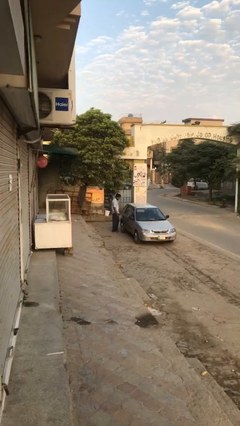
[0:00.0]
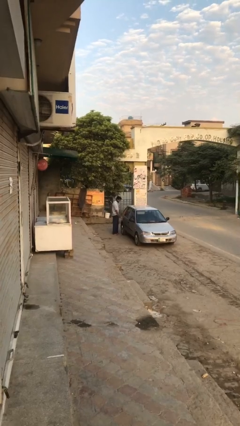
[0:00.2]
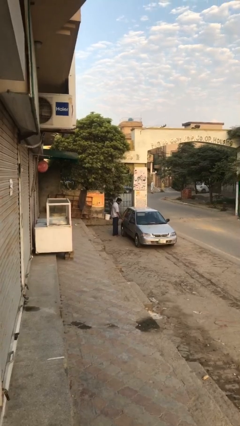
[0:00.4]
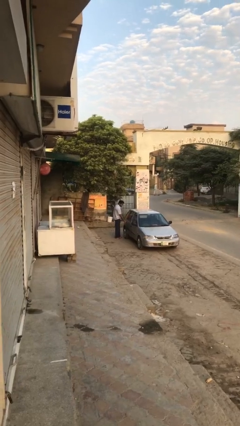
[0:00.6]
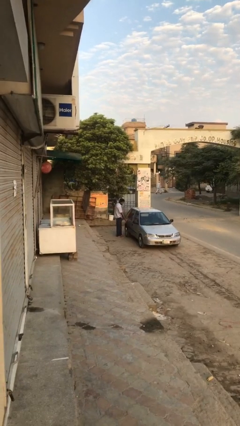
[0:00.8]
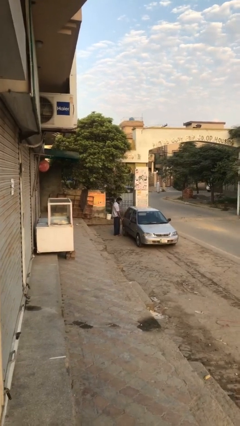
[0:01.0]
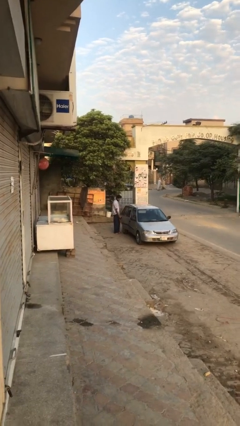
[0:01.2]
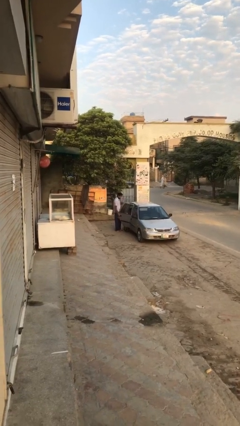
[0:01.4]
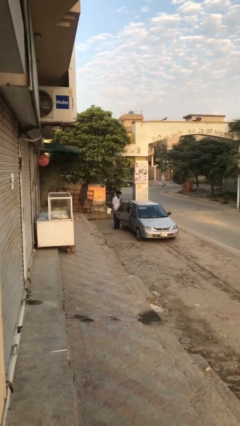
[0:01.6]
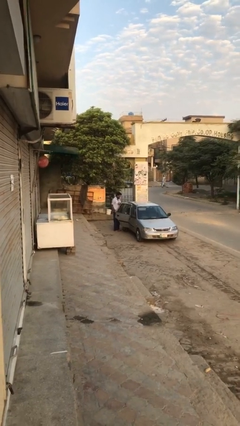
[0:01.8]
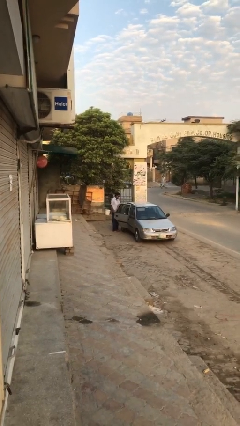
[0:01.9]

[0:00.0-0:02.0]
person opens car door

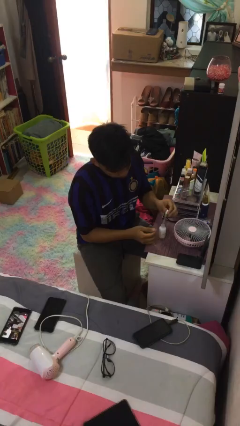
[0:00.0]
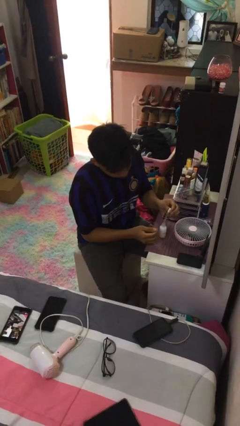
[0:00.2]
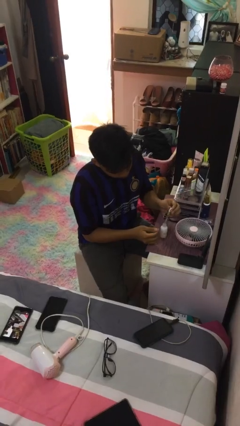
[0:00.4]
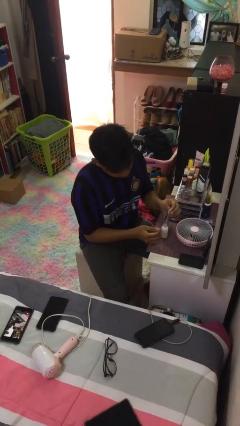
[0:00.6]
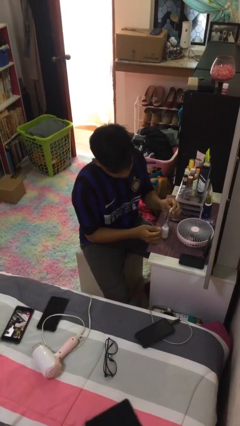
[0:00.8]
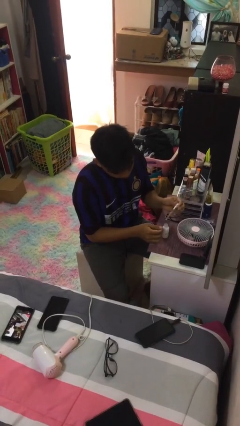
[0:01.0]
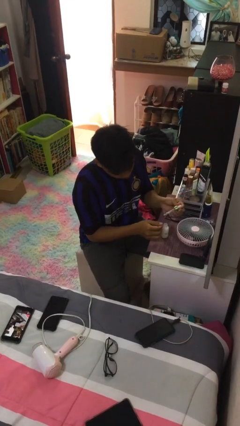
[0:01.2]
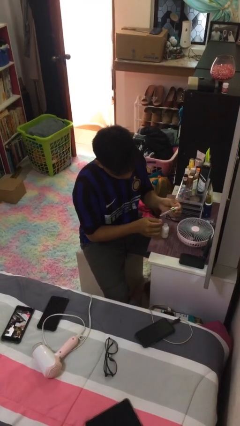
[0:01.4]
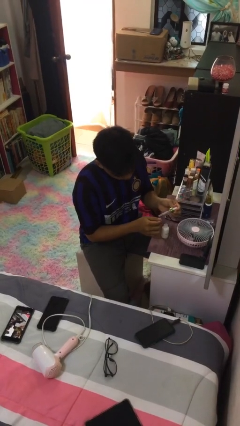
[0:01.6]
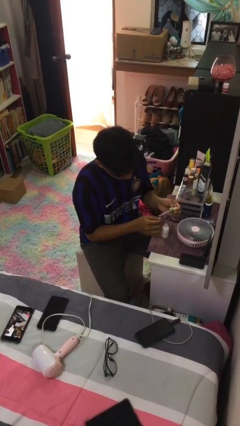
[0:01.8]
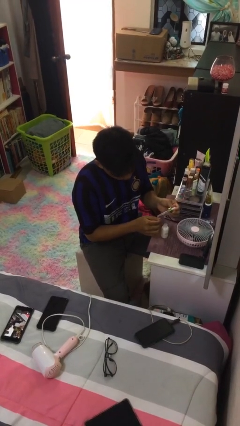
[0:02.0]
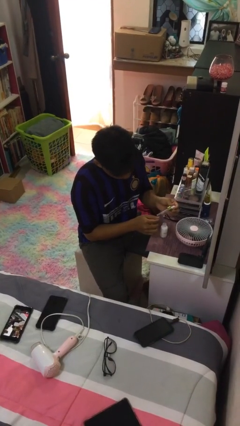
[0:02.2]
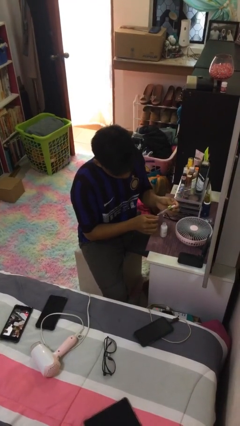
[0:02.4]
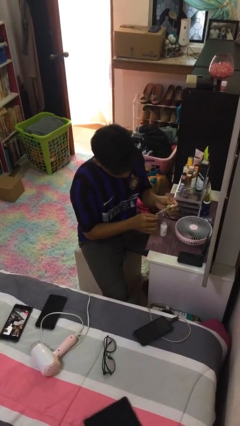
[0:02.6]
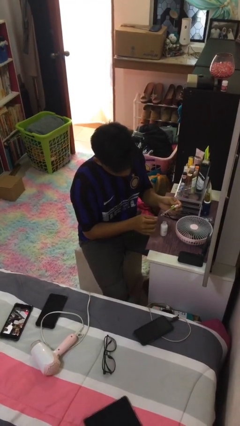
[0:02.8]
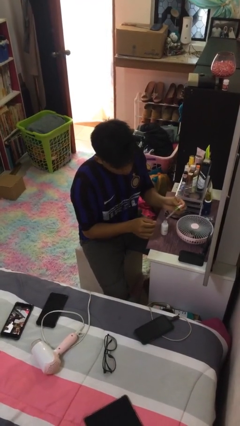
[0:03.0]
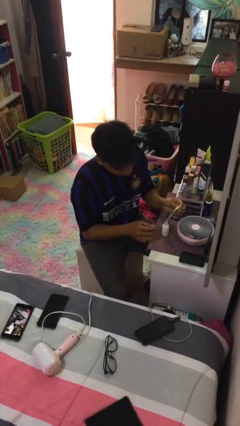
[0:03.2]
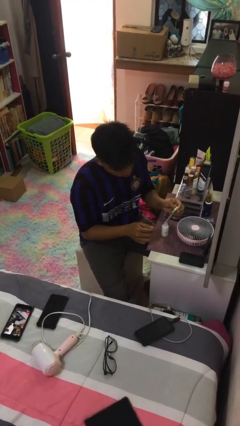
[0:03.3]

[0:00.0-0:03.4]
person paints fingernails

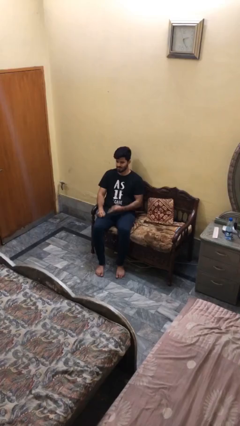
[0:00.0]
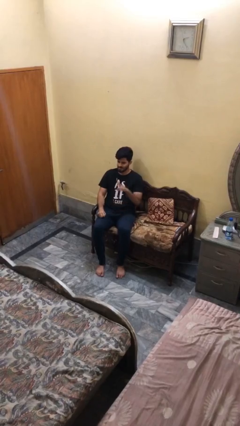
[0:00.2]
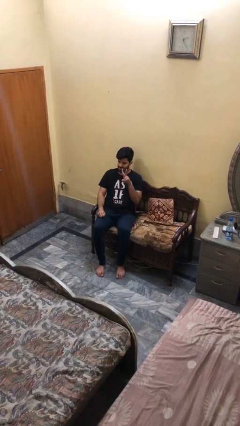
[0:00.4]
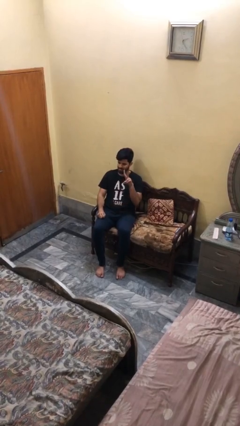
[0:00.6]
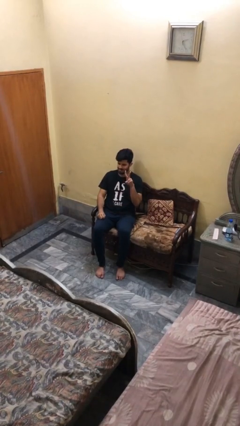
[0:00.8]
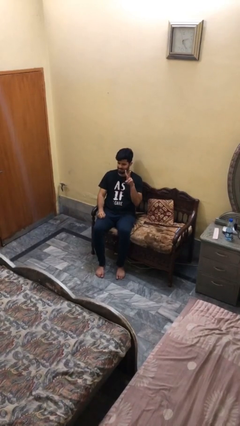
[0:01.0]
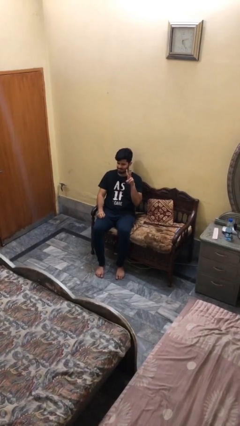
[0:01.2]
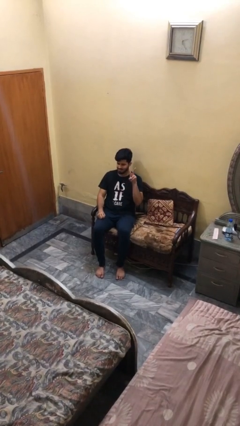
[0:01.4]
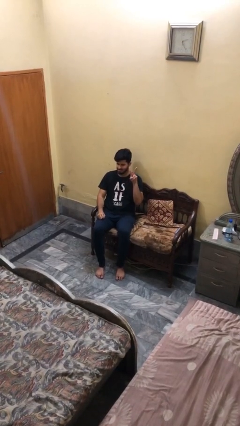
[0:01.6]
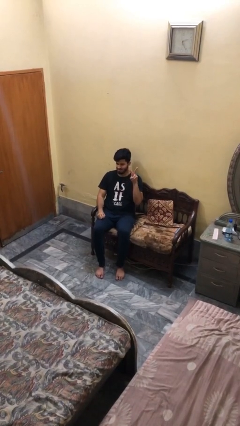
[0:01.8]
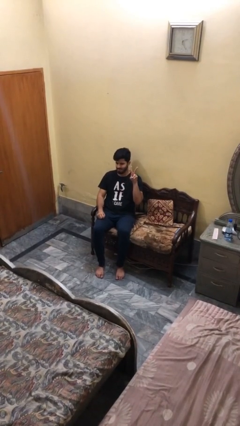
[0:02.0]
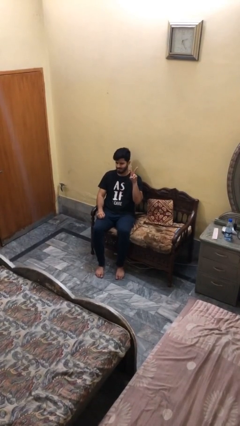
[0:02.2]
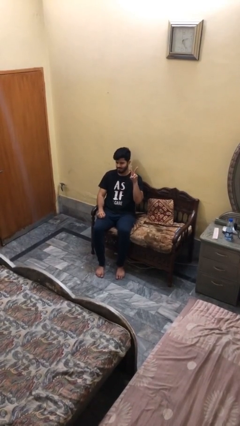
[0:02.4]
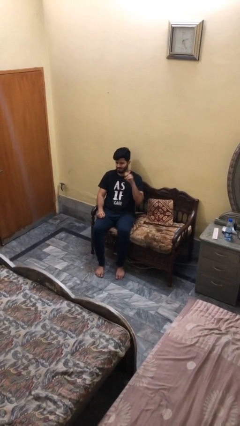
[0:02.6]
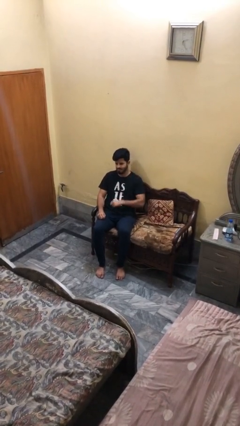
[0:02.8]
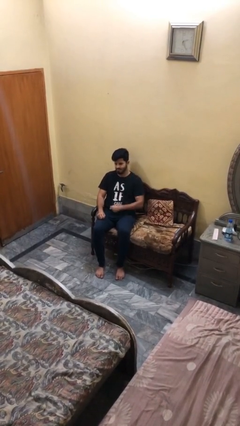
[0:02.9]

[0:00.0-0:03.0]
person gestures peace

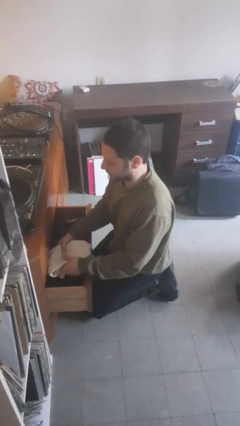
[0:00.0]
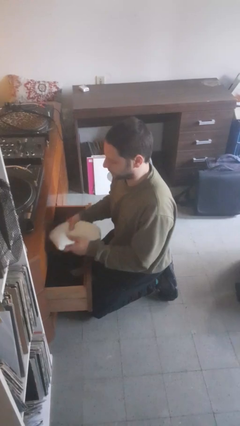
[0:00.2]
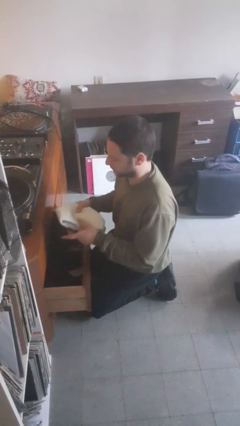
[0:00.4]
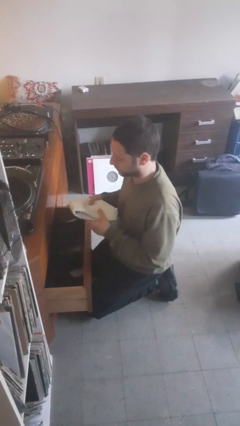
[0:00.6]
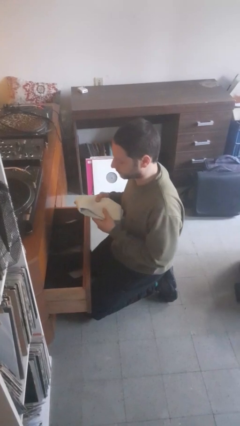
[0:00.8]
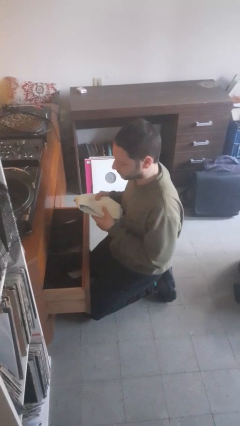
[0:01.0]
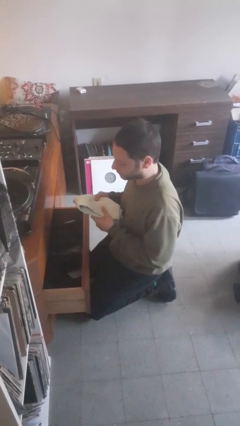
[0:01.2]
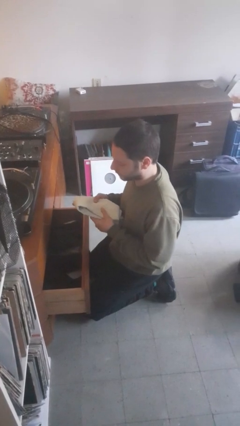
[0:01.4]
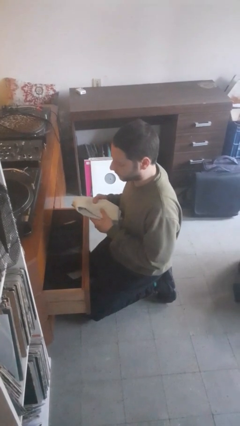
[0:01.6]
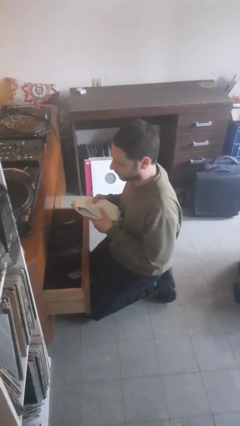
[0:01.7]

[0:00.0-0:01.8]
person takes clothes from dresser

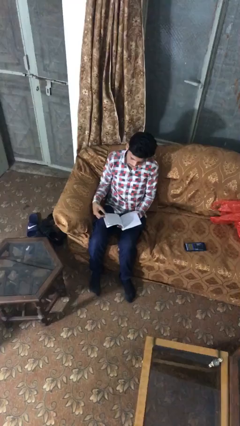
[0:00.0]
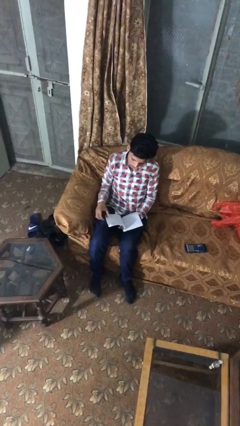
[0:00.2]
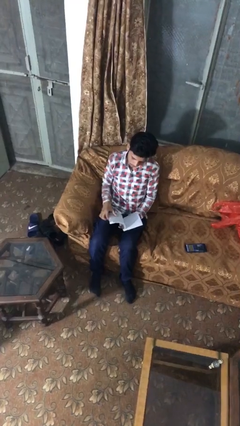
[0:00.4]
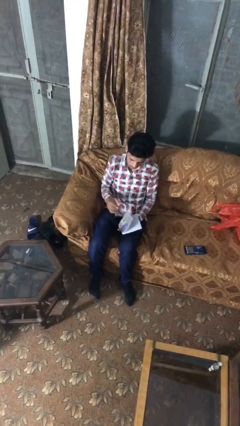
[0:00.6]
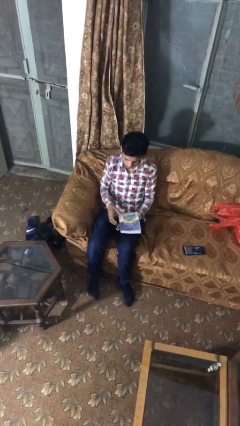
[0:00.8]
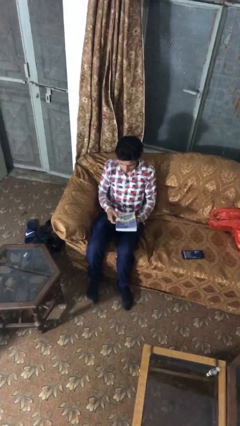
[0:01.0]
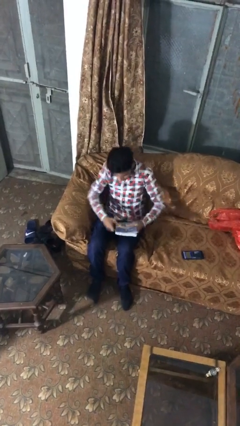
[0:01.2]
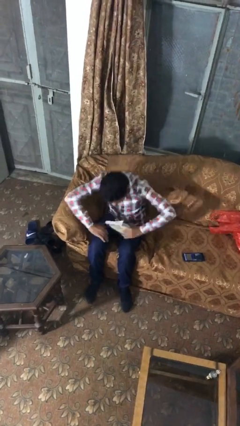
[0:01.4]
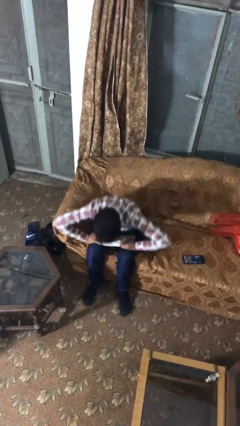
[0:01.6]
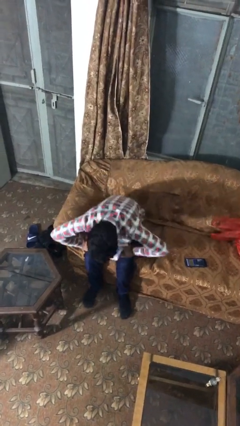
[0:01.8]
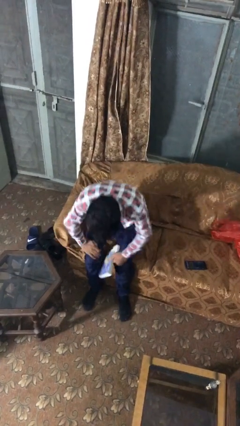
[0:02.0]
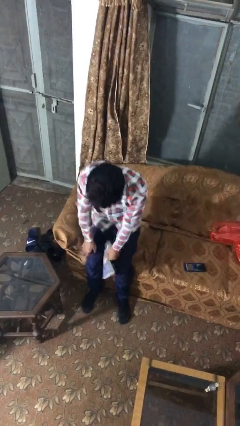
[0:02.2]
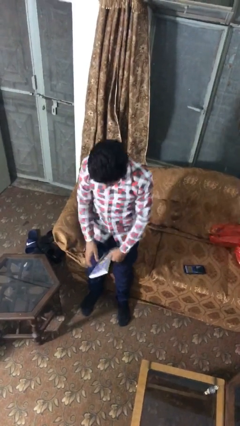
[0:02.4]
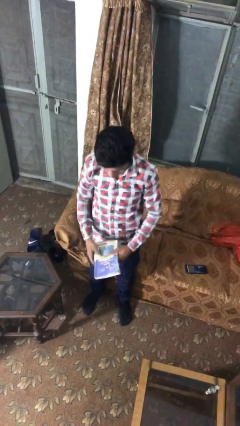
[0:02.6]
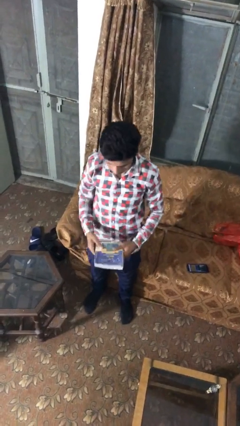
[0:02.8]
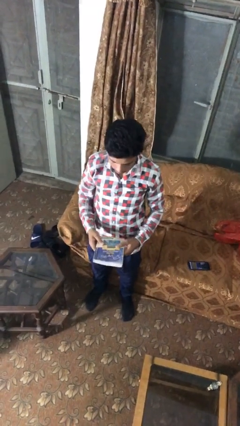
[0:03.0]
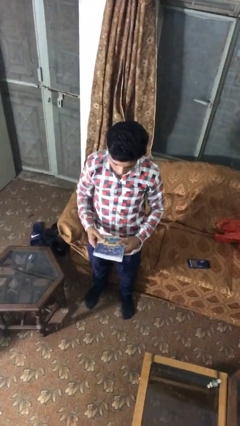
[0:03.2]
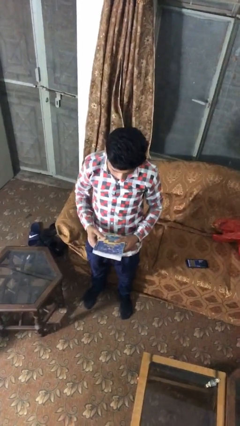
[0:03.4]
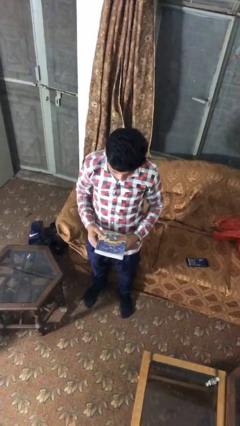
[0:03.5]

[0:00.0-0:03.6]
person stands up

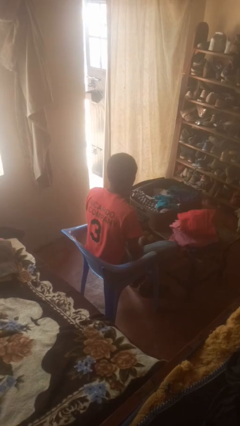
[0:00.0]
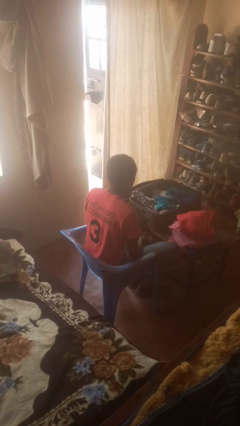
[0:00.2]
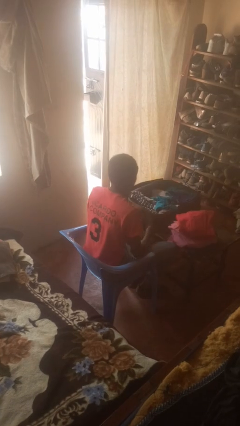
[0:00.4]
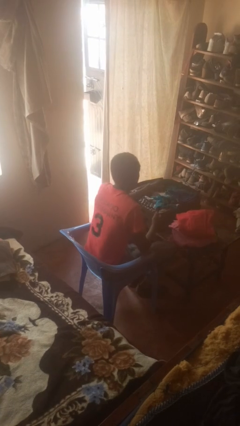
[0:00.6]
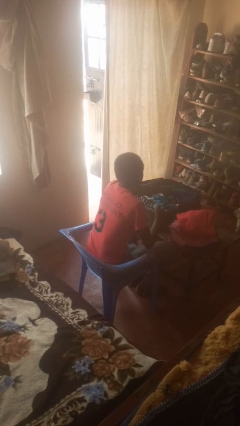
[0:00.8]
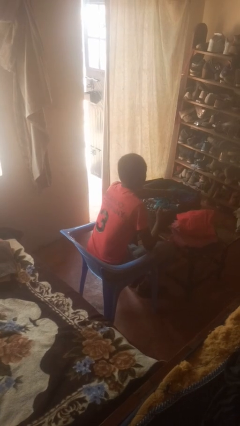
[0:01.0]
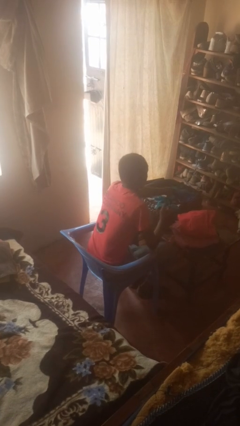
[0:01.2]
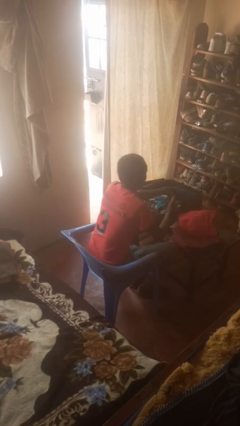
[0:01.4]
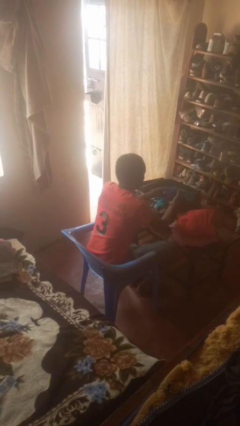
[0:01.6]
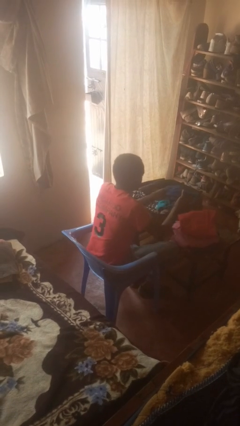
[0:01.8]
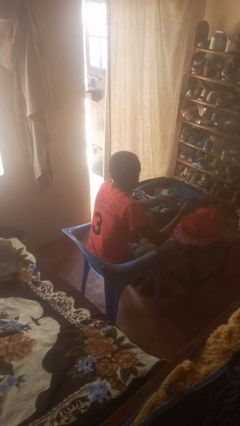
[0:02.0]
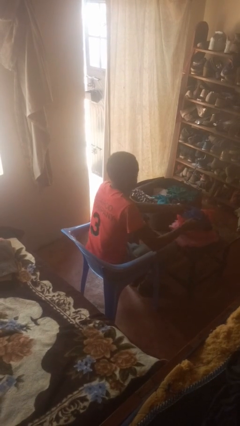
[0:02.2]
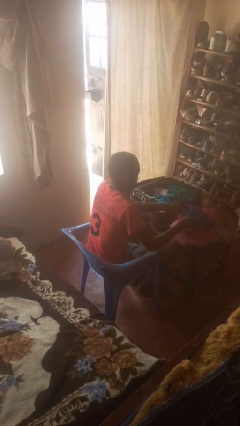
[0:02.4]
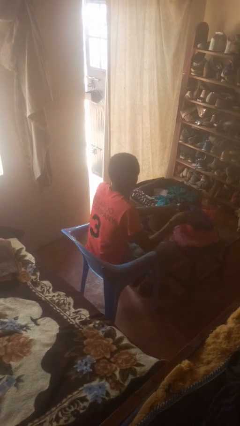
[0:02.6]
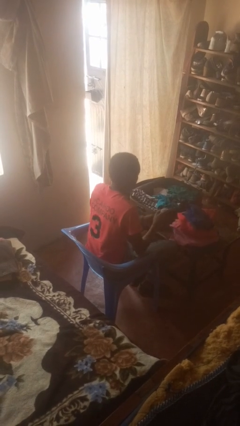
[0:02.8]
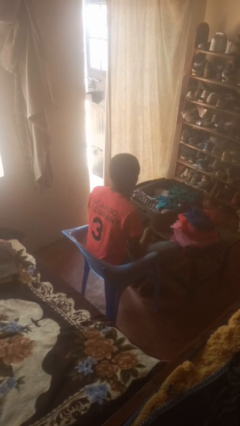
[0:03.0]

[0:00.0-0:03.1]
person unloads clothes from suitcase
